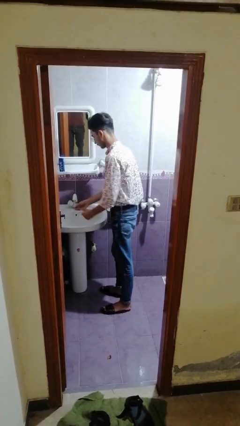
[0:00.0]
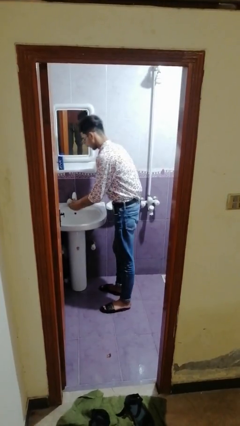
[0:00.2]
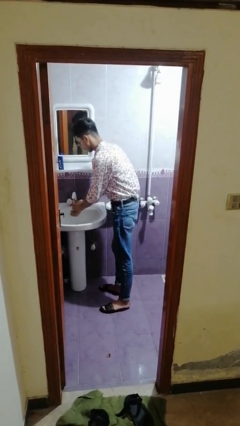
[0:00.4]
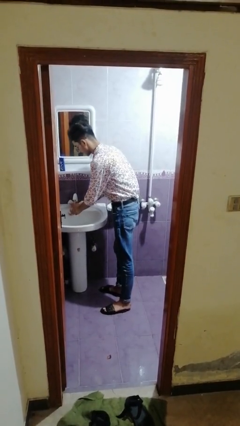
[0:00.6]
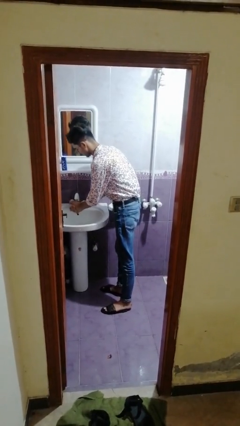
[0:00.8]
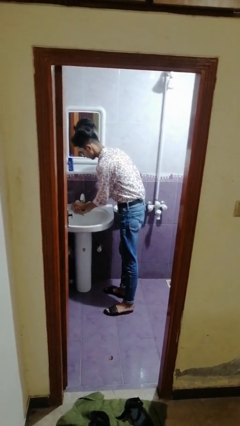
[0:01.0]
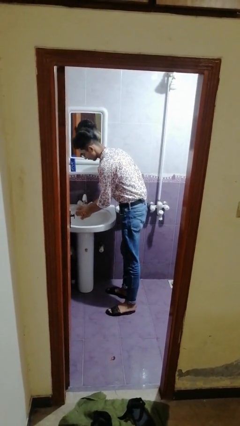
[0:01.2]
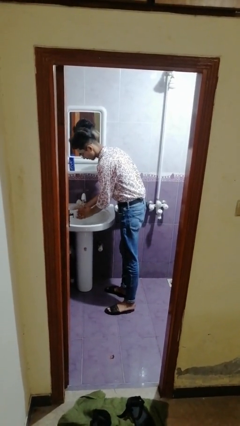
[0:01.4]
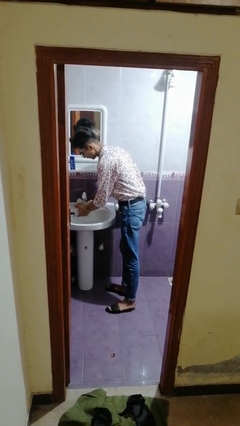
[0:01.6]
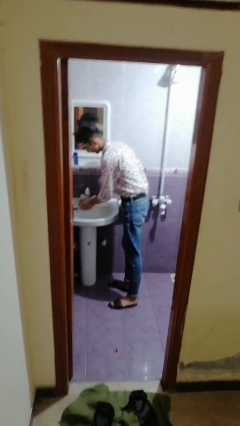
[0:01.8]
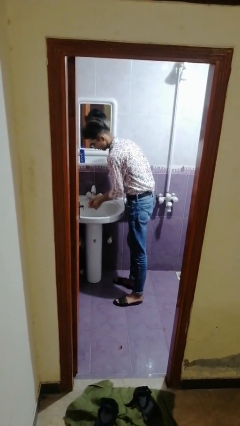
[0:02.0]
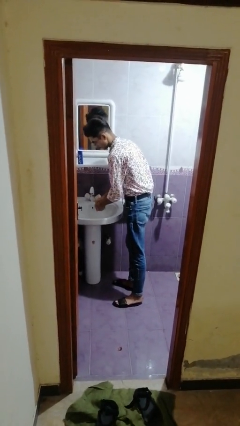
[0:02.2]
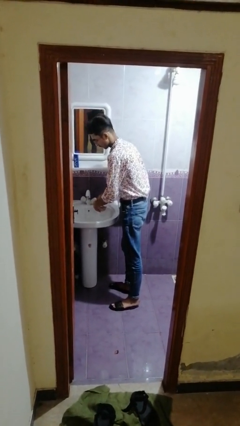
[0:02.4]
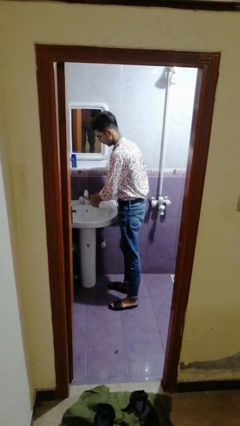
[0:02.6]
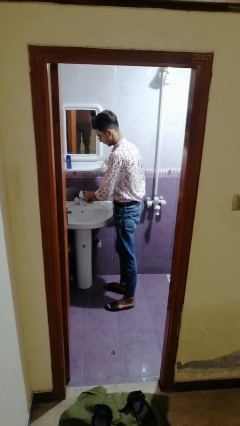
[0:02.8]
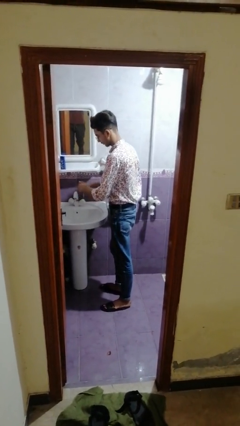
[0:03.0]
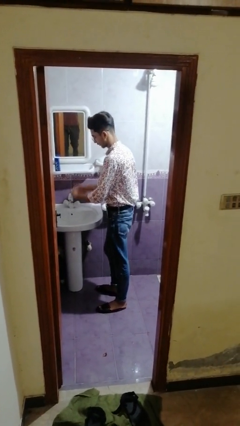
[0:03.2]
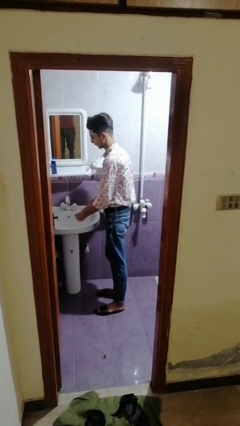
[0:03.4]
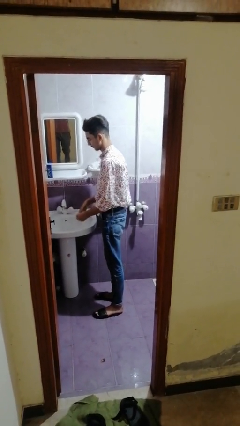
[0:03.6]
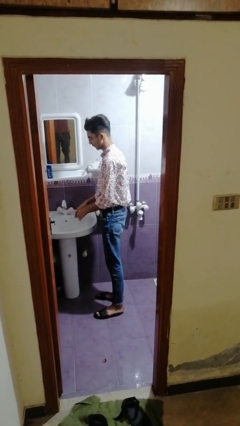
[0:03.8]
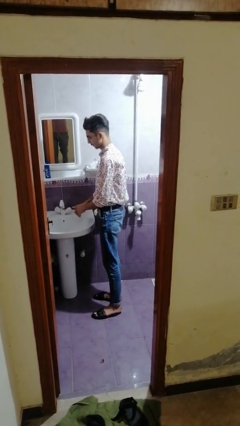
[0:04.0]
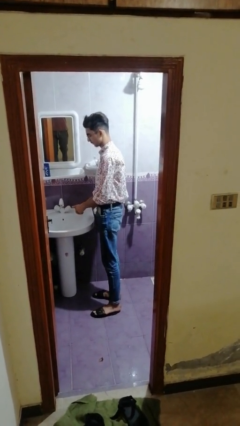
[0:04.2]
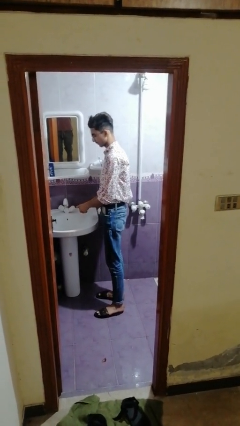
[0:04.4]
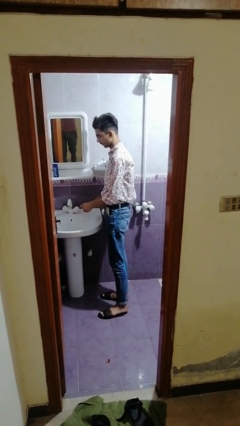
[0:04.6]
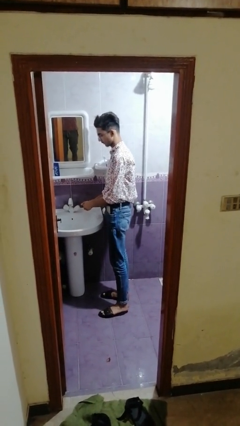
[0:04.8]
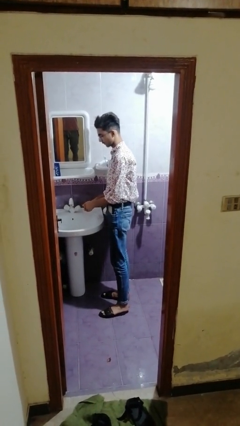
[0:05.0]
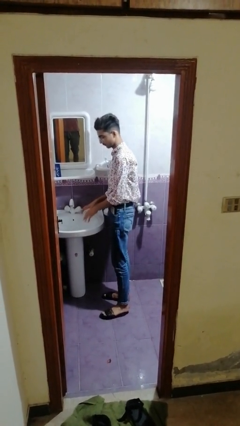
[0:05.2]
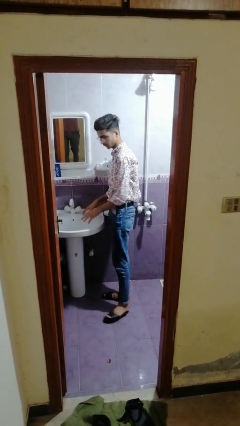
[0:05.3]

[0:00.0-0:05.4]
person washes hands

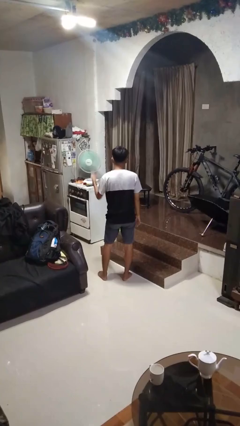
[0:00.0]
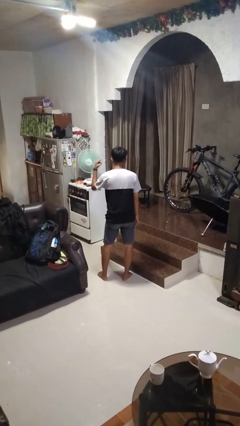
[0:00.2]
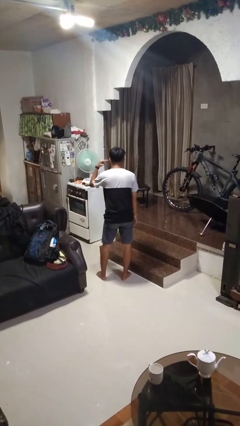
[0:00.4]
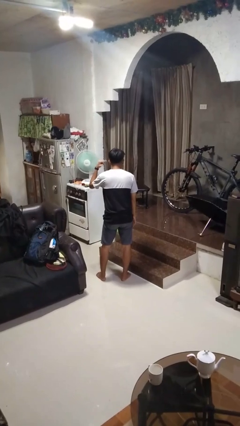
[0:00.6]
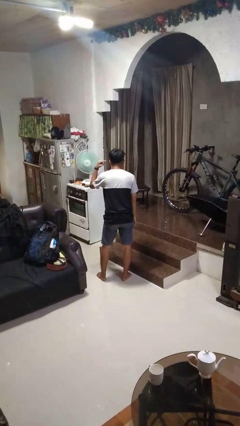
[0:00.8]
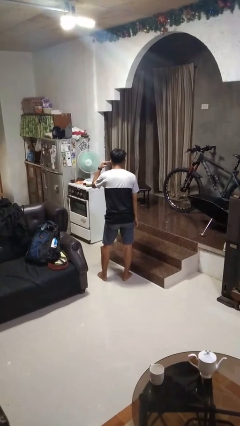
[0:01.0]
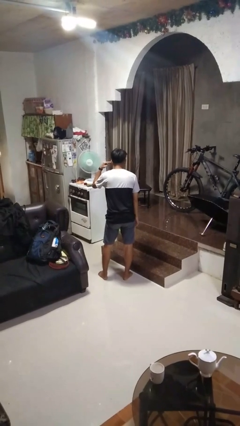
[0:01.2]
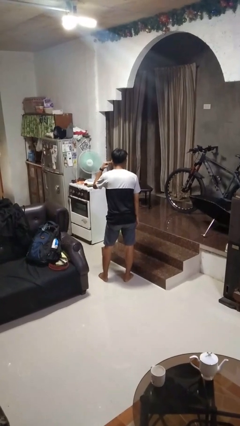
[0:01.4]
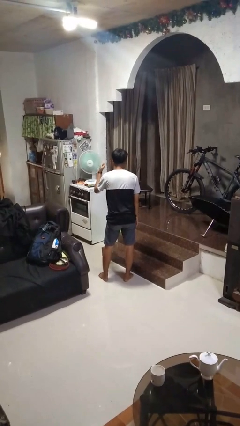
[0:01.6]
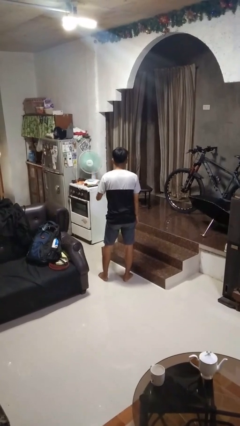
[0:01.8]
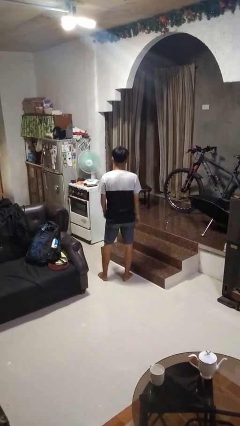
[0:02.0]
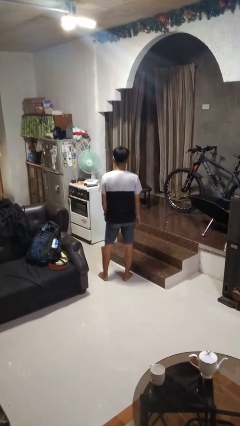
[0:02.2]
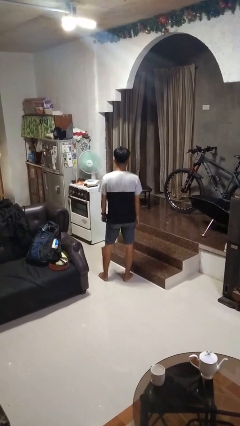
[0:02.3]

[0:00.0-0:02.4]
person gestures listen closely

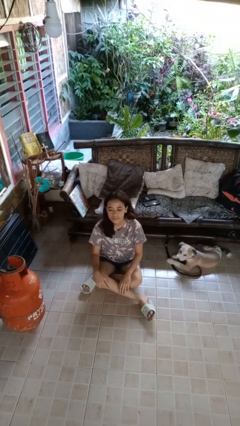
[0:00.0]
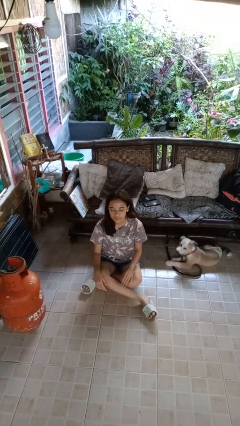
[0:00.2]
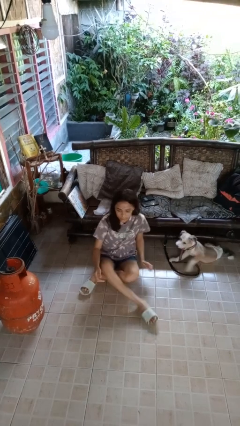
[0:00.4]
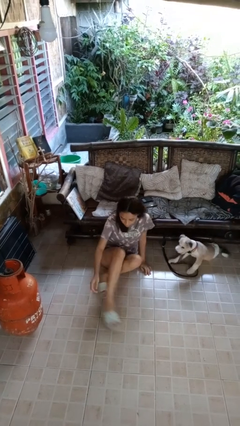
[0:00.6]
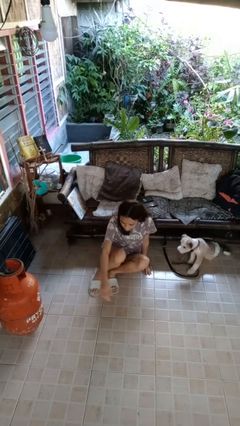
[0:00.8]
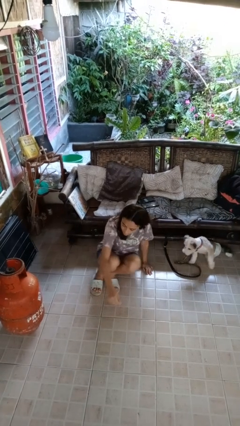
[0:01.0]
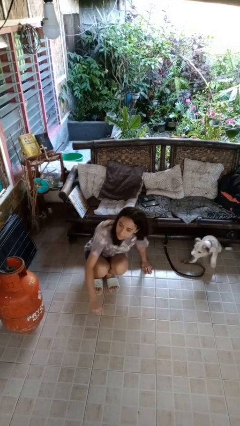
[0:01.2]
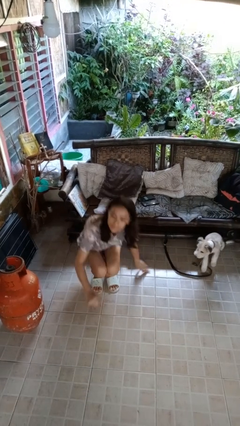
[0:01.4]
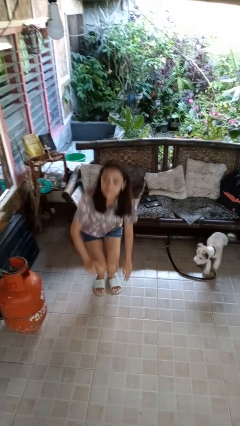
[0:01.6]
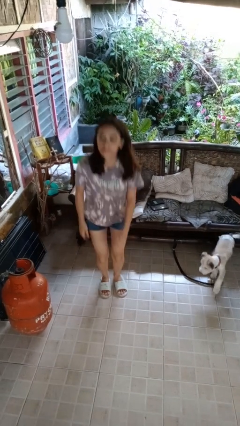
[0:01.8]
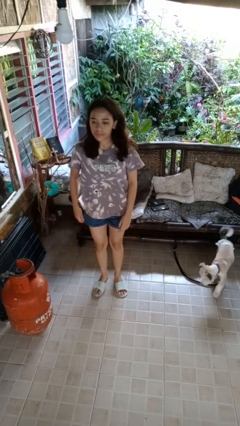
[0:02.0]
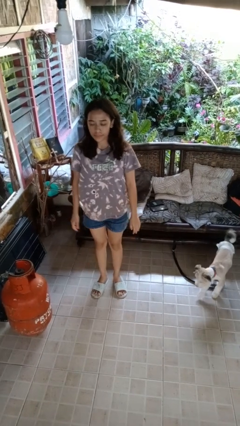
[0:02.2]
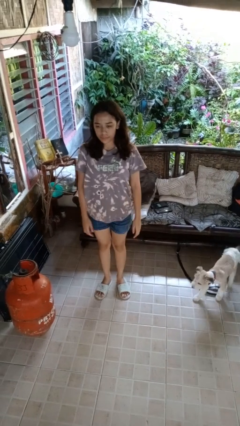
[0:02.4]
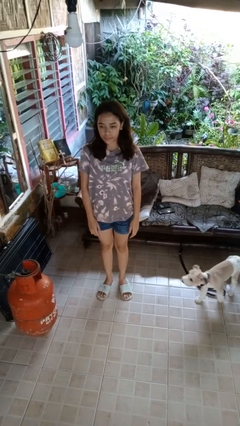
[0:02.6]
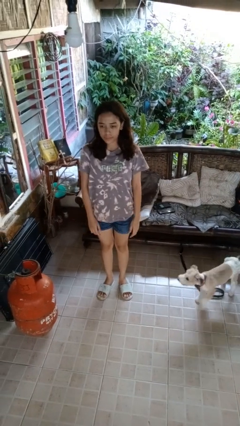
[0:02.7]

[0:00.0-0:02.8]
person stands up from floor

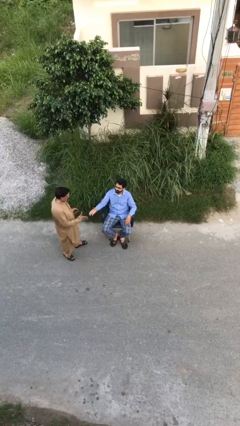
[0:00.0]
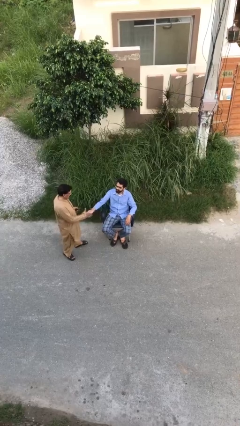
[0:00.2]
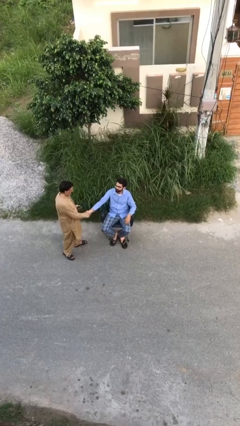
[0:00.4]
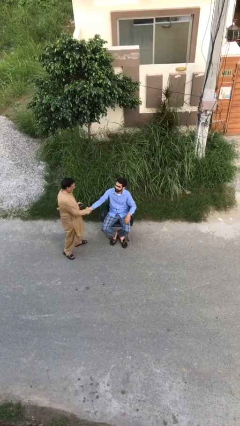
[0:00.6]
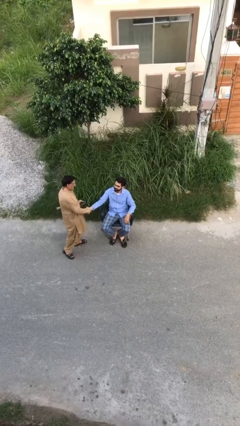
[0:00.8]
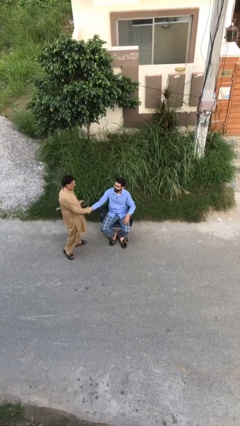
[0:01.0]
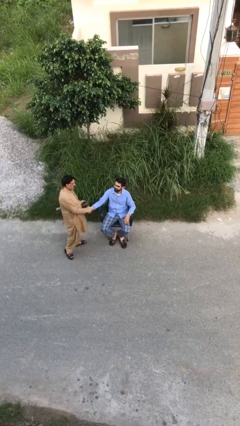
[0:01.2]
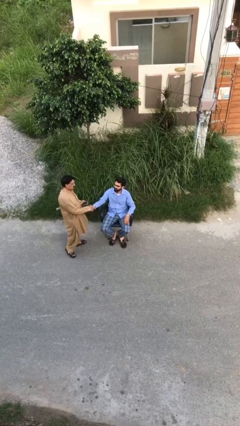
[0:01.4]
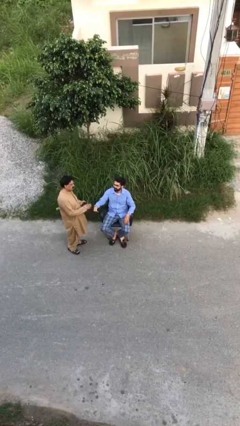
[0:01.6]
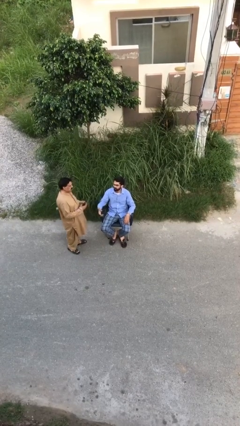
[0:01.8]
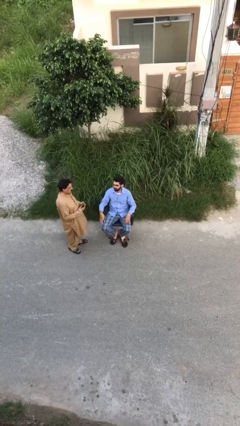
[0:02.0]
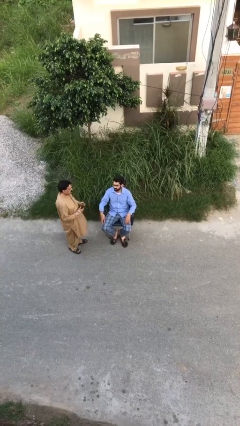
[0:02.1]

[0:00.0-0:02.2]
person shakes hand

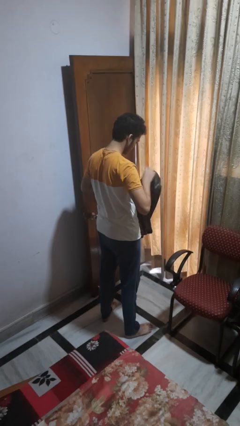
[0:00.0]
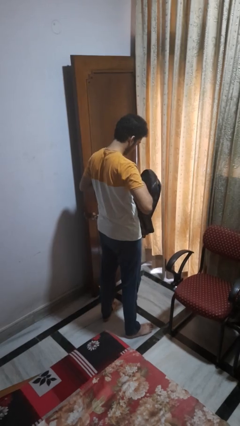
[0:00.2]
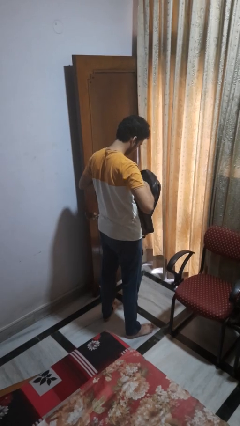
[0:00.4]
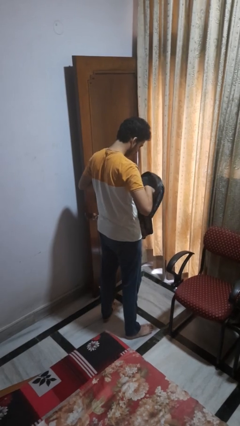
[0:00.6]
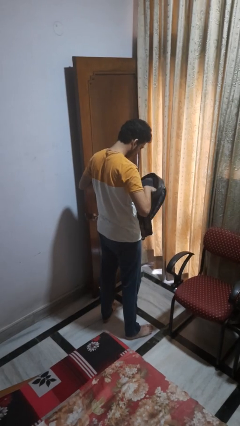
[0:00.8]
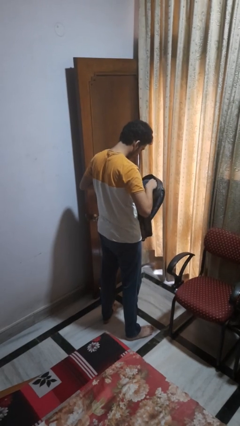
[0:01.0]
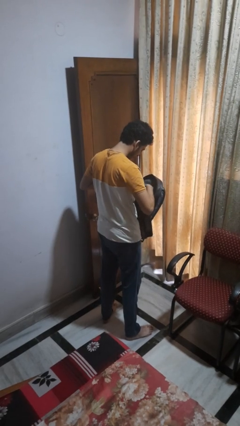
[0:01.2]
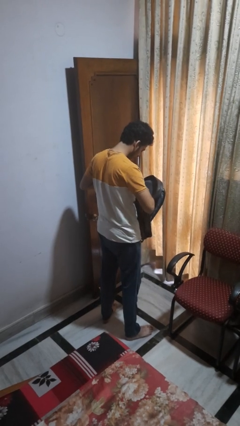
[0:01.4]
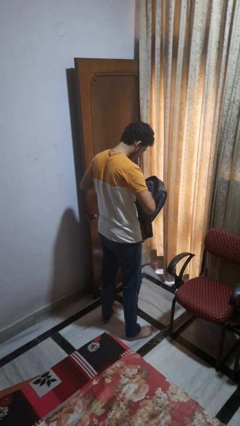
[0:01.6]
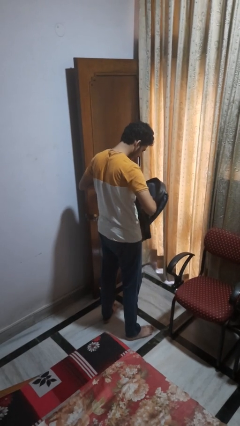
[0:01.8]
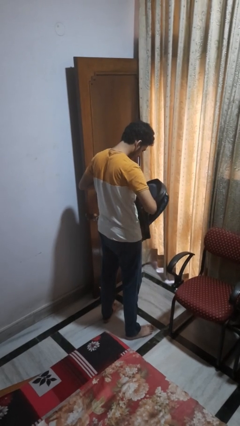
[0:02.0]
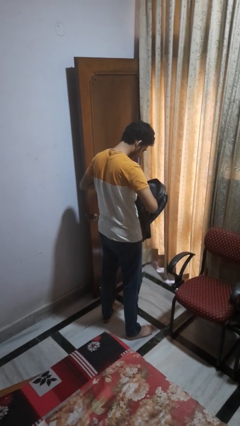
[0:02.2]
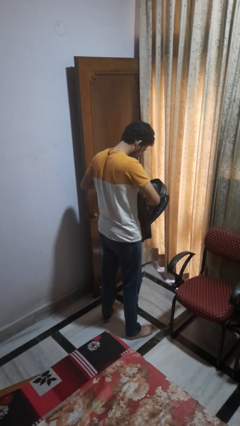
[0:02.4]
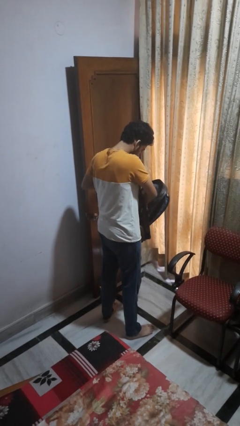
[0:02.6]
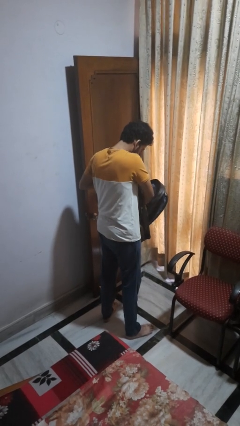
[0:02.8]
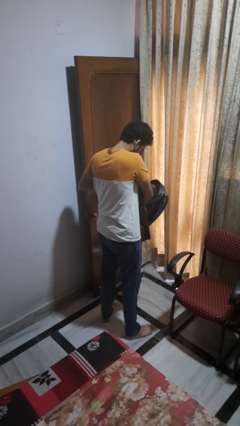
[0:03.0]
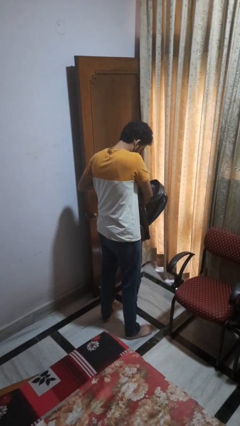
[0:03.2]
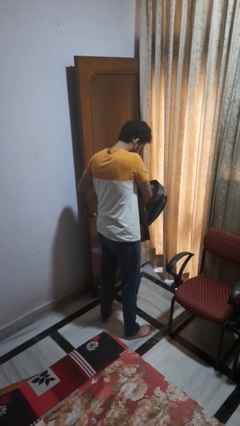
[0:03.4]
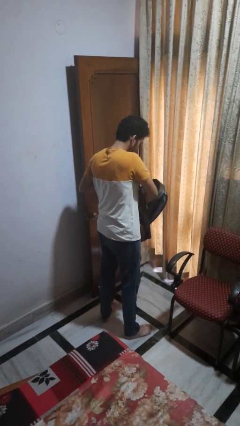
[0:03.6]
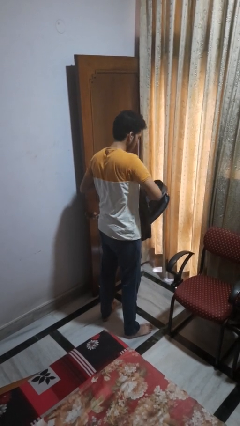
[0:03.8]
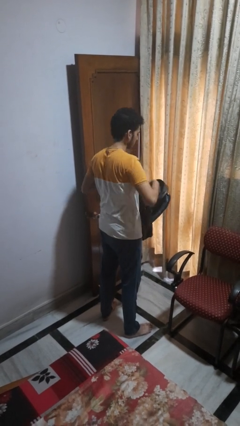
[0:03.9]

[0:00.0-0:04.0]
person searches in backpack

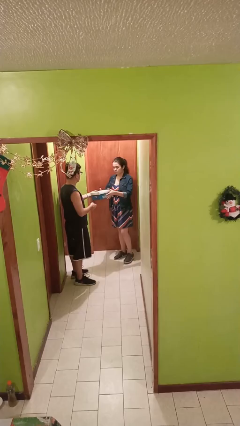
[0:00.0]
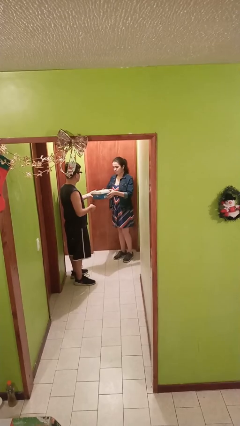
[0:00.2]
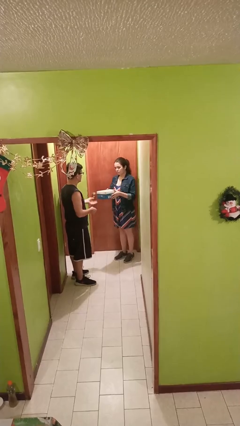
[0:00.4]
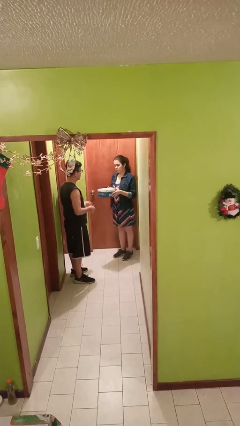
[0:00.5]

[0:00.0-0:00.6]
person transfers object to person
